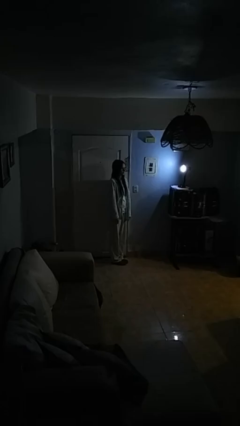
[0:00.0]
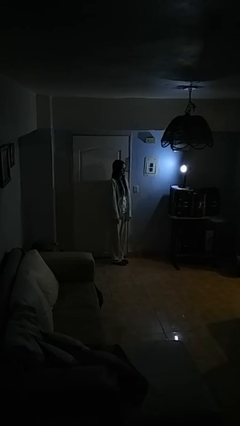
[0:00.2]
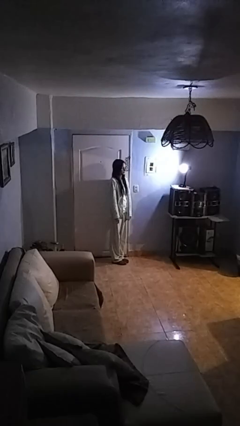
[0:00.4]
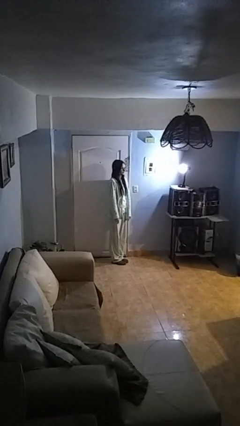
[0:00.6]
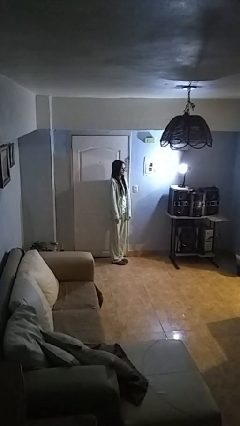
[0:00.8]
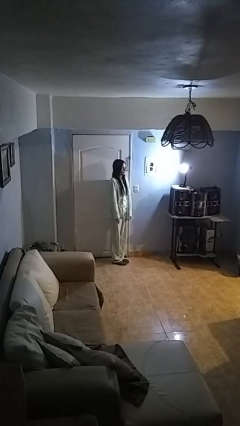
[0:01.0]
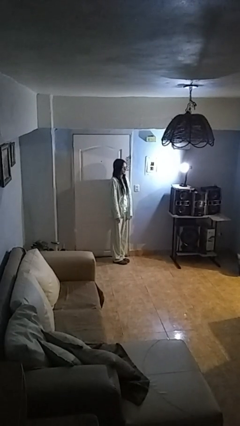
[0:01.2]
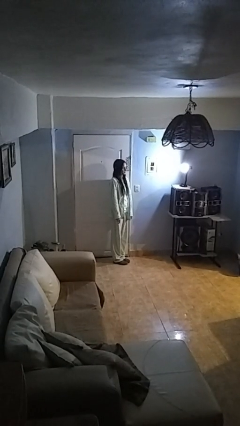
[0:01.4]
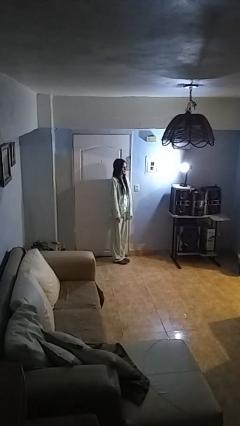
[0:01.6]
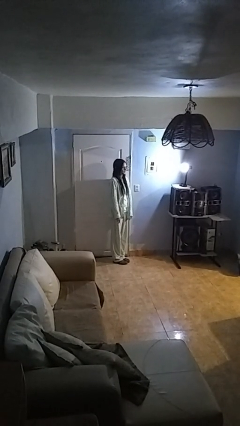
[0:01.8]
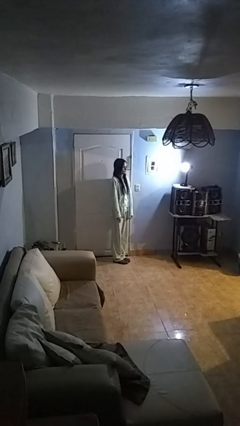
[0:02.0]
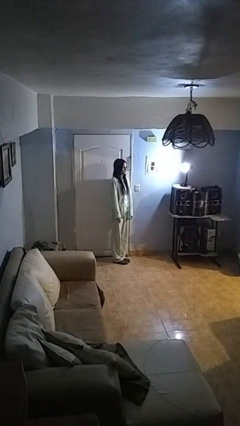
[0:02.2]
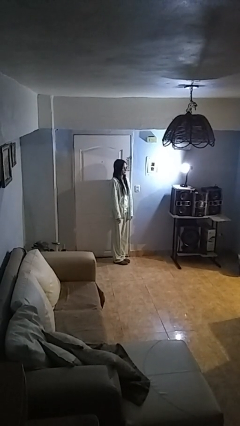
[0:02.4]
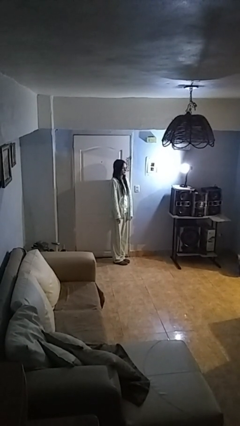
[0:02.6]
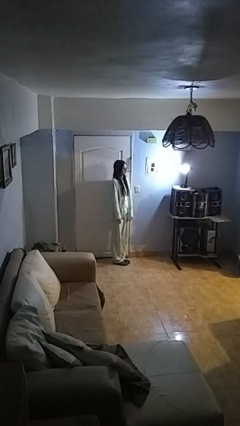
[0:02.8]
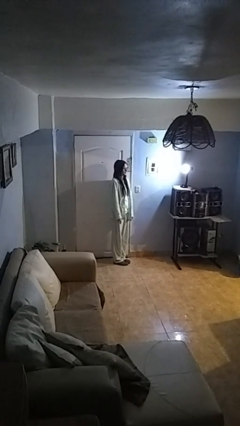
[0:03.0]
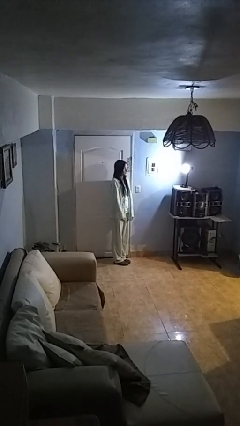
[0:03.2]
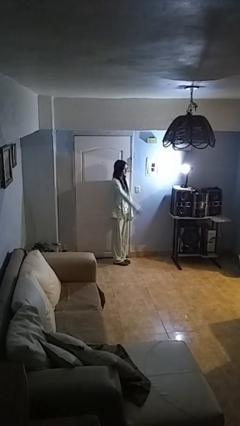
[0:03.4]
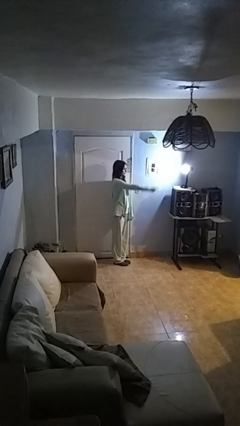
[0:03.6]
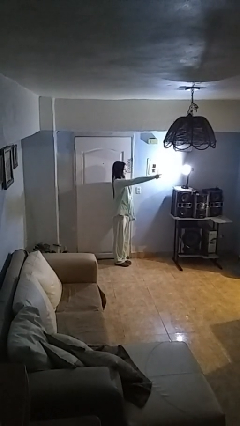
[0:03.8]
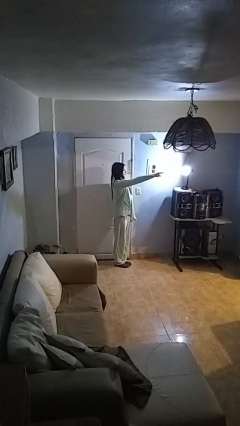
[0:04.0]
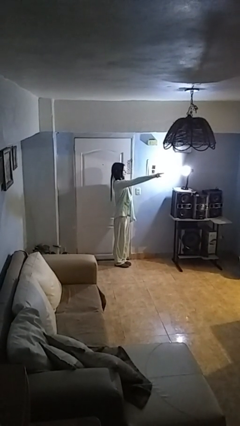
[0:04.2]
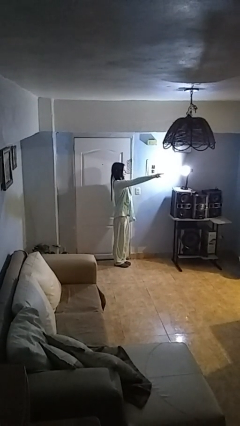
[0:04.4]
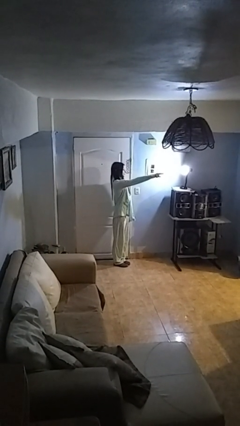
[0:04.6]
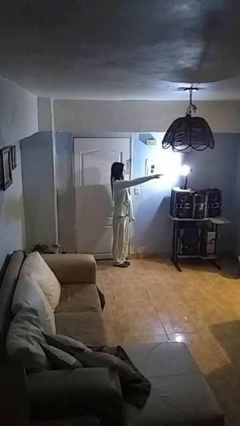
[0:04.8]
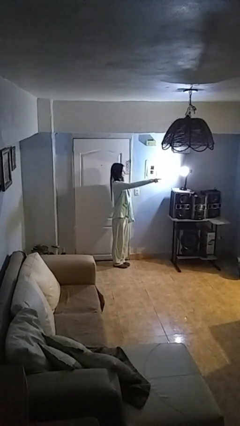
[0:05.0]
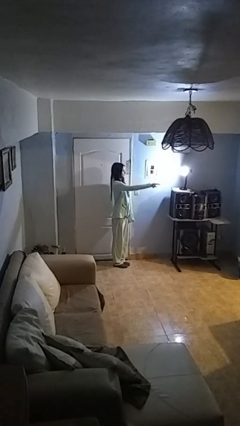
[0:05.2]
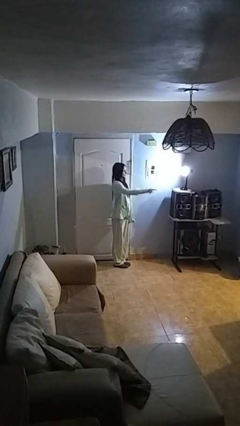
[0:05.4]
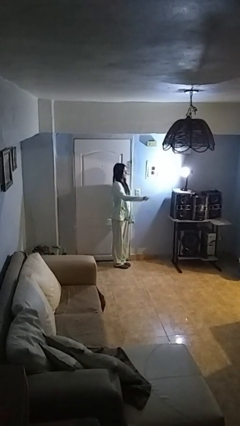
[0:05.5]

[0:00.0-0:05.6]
person points at person

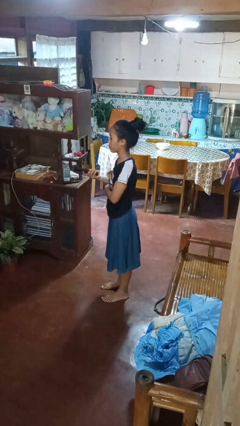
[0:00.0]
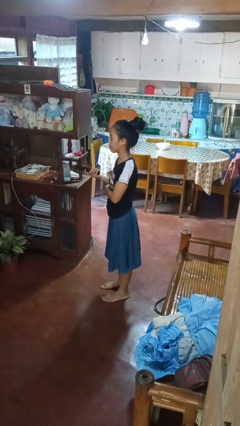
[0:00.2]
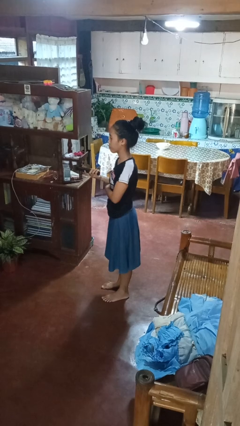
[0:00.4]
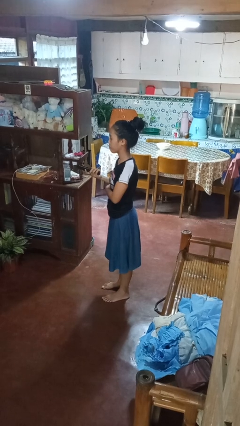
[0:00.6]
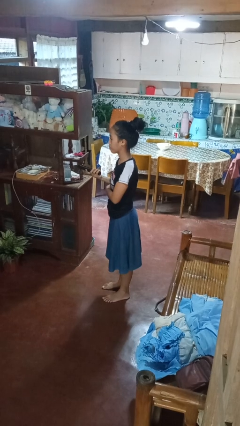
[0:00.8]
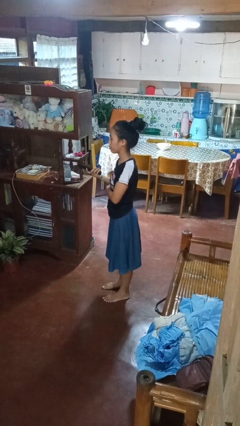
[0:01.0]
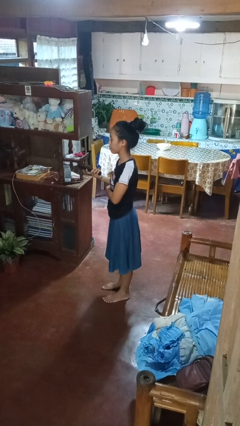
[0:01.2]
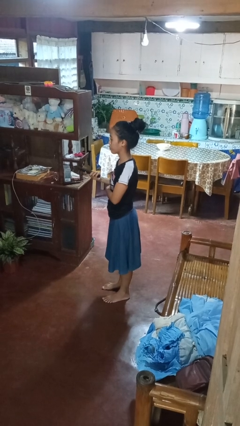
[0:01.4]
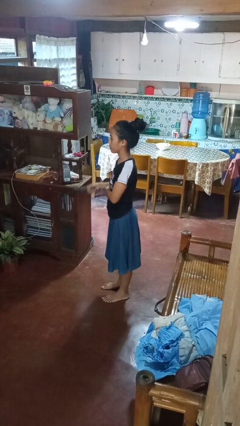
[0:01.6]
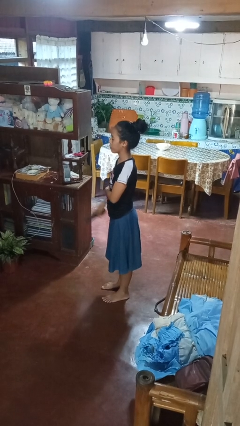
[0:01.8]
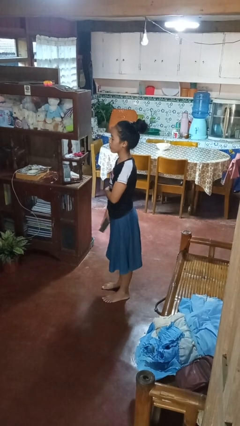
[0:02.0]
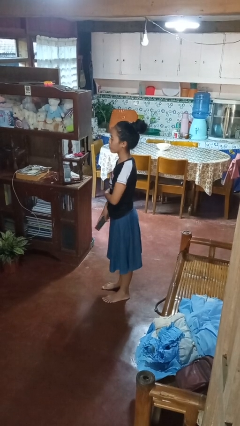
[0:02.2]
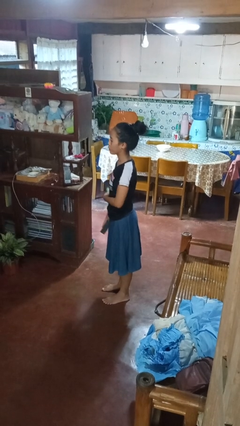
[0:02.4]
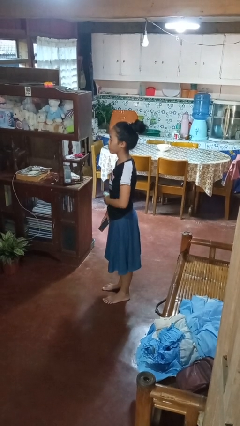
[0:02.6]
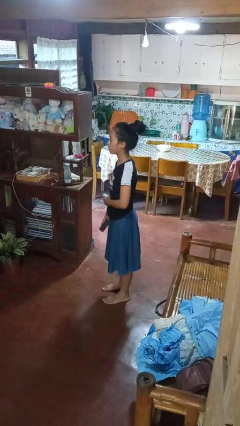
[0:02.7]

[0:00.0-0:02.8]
person uses television remote

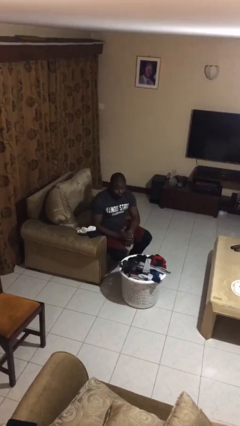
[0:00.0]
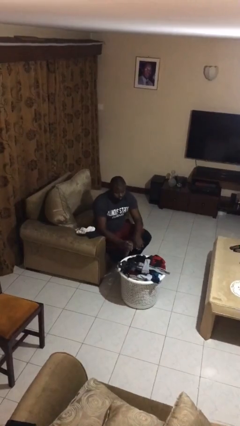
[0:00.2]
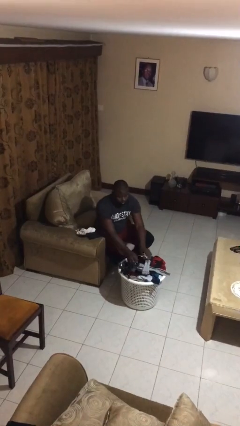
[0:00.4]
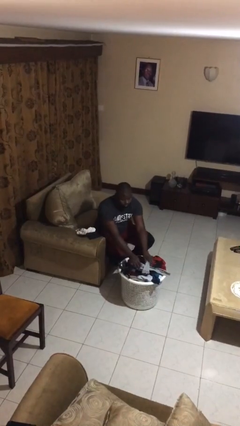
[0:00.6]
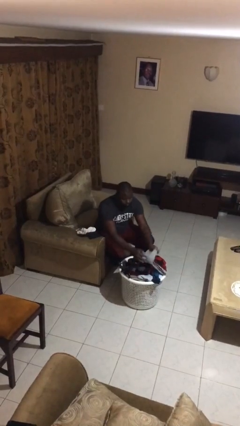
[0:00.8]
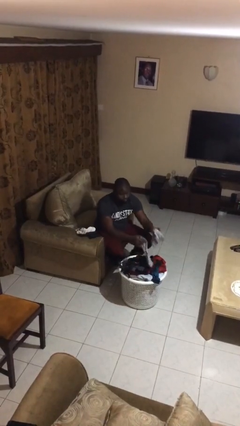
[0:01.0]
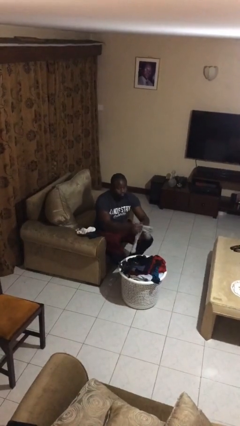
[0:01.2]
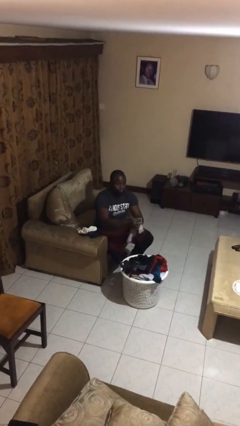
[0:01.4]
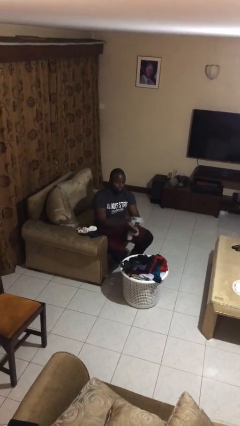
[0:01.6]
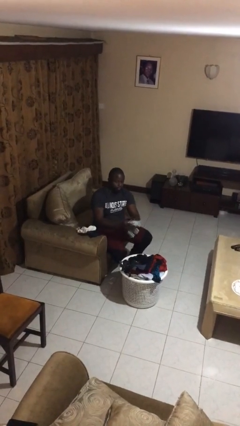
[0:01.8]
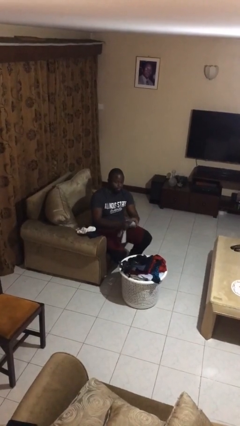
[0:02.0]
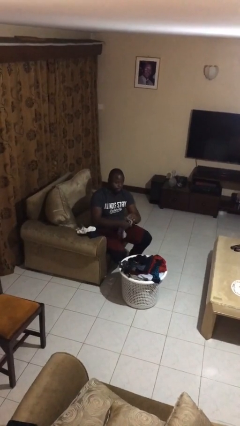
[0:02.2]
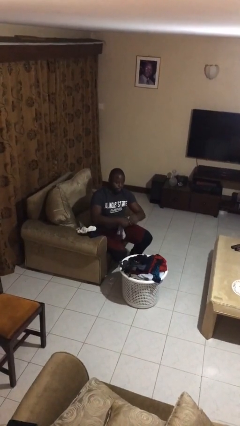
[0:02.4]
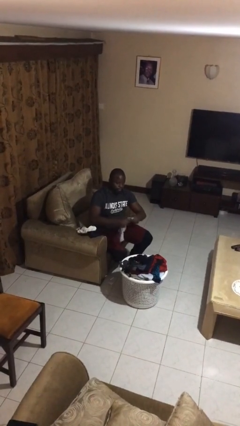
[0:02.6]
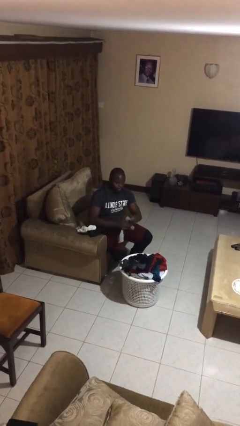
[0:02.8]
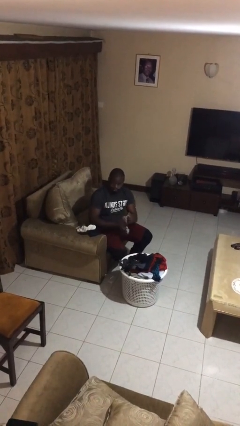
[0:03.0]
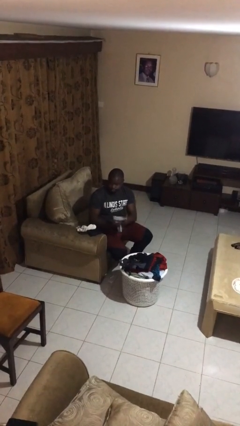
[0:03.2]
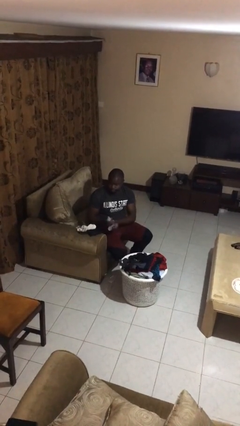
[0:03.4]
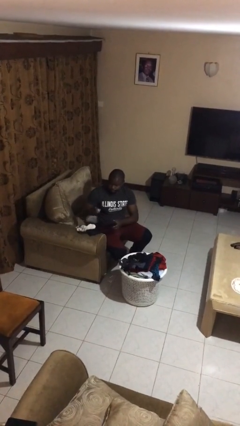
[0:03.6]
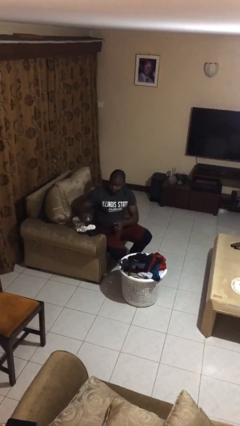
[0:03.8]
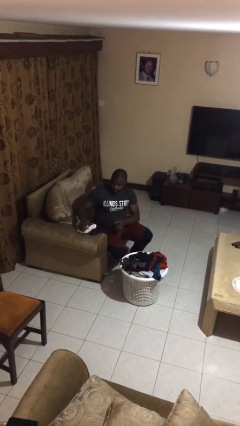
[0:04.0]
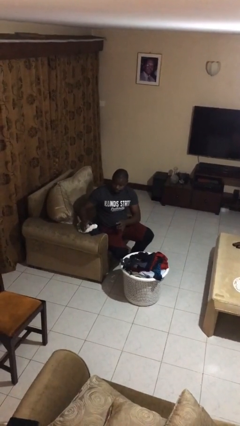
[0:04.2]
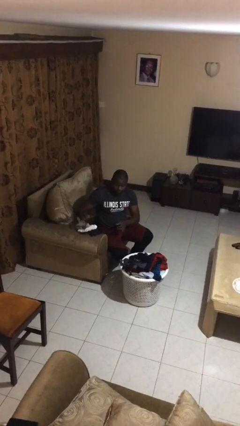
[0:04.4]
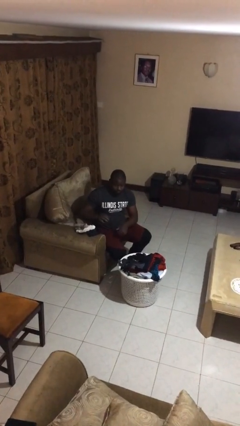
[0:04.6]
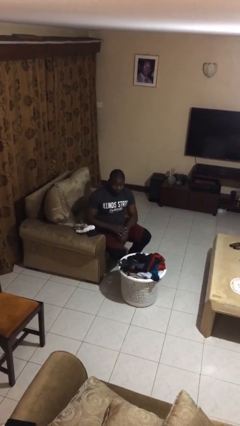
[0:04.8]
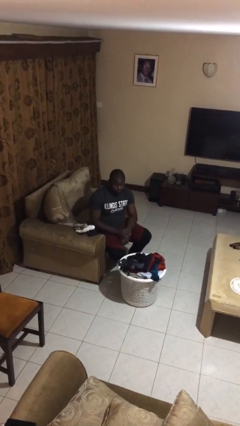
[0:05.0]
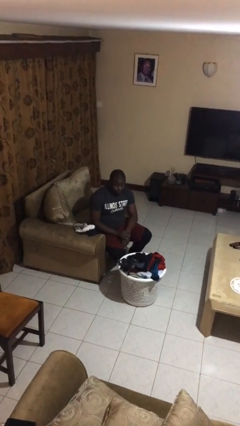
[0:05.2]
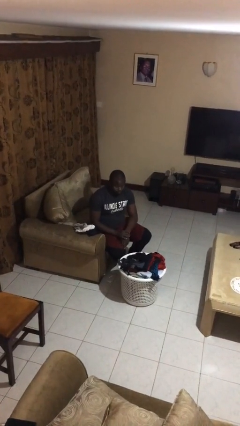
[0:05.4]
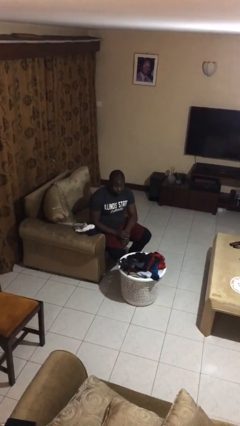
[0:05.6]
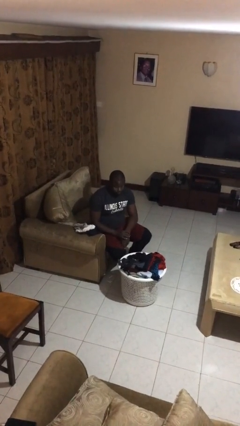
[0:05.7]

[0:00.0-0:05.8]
person folds socks

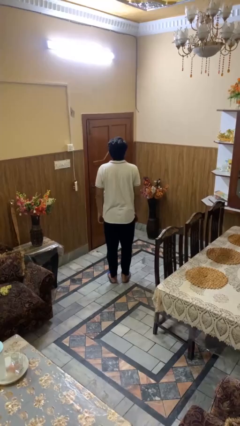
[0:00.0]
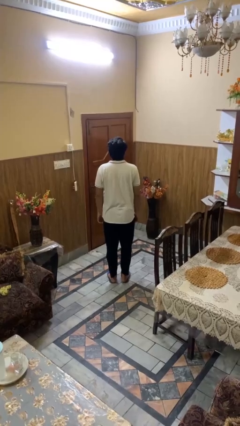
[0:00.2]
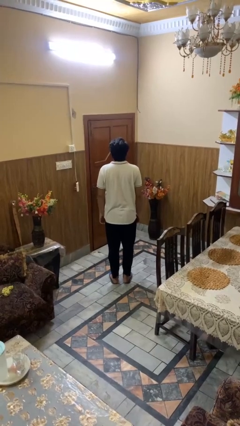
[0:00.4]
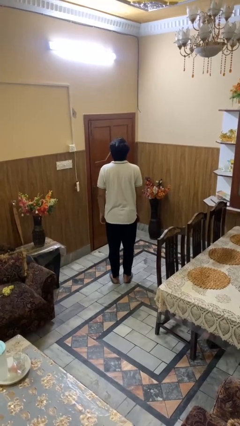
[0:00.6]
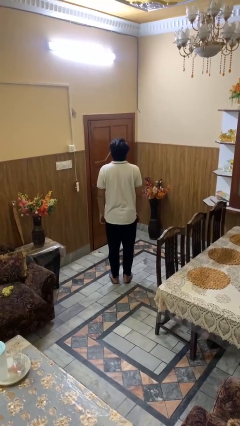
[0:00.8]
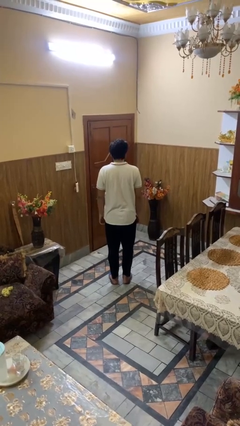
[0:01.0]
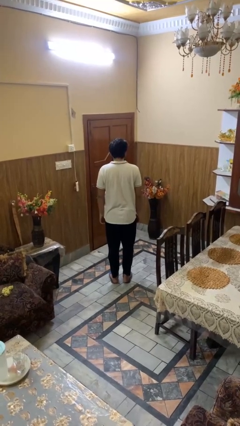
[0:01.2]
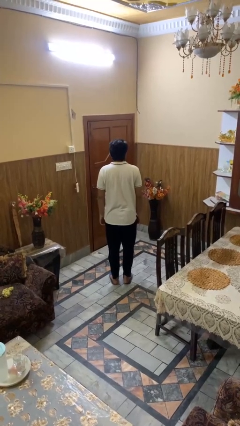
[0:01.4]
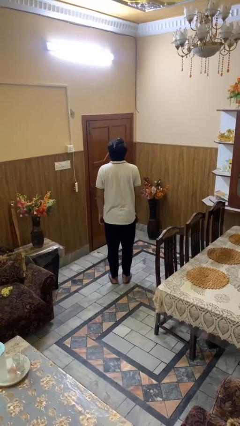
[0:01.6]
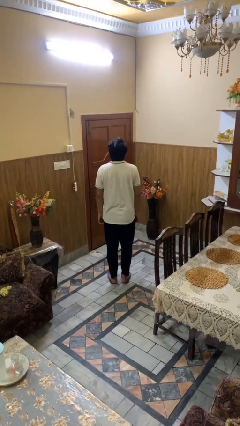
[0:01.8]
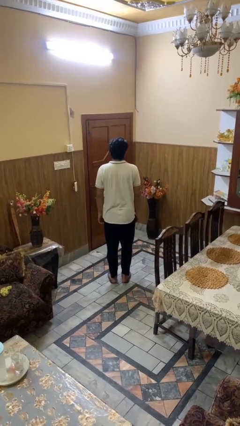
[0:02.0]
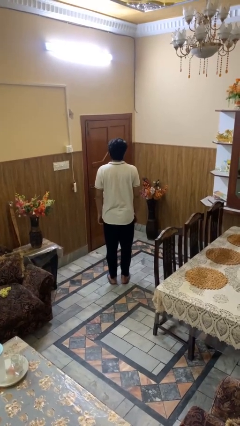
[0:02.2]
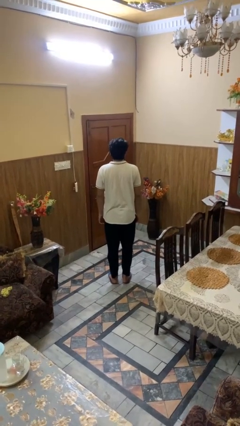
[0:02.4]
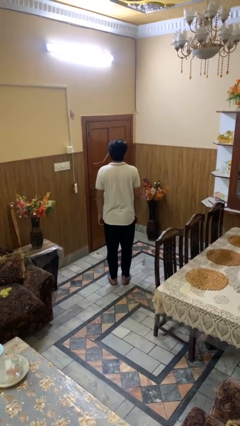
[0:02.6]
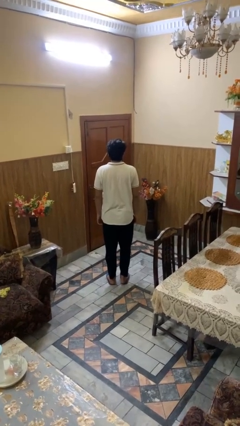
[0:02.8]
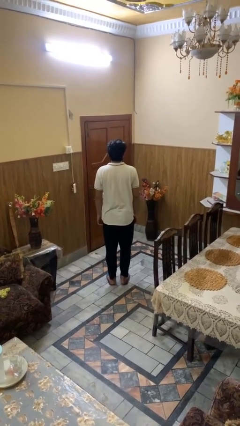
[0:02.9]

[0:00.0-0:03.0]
person nods head

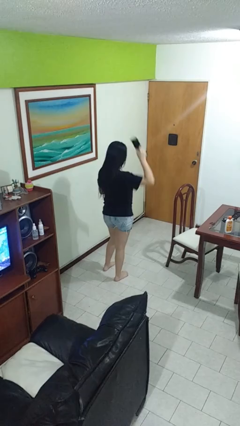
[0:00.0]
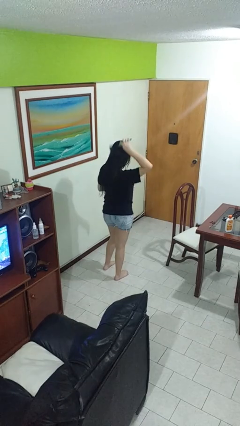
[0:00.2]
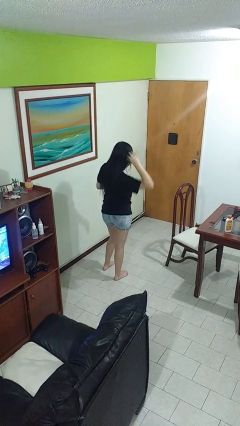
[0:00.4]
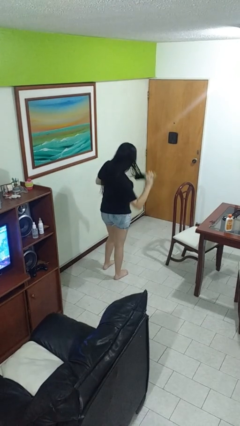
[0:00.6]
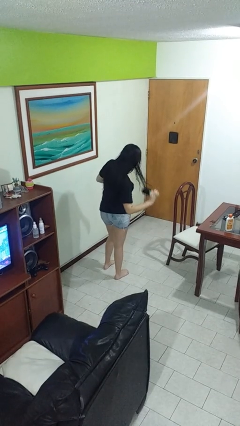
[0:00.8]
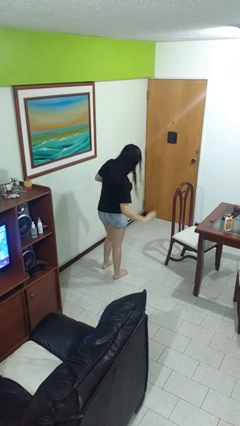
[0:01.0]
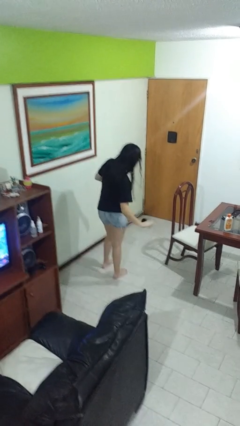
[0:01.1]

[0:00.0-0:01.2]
person brushes hair
